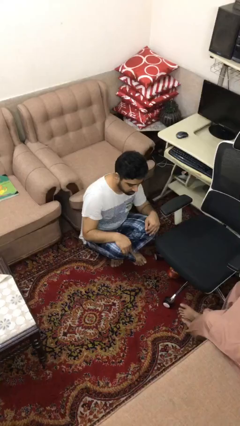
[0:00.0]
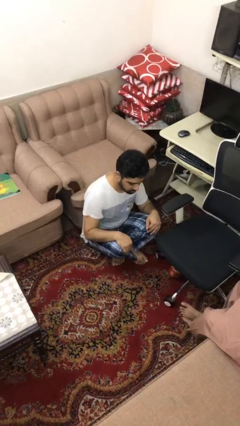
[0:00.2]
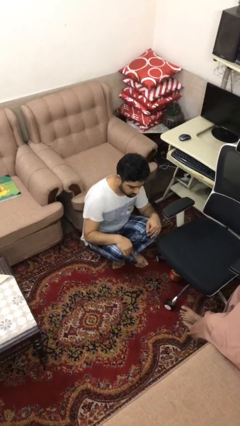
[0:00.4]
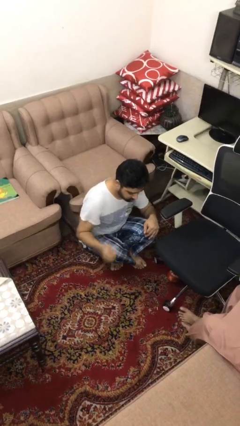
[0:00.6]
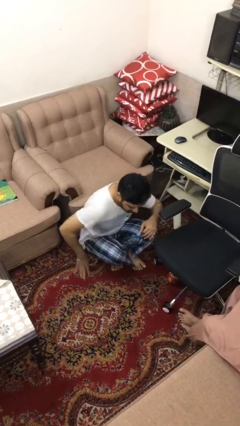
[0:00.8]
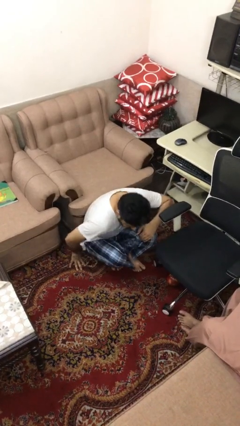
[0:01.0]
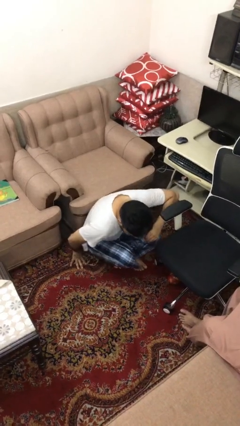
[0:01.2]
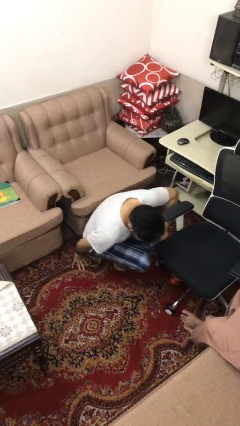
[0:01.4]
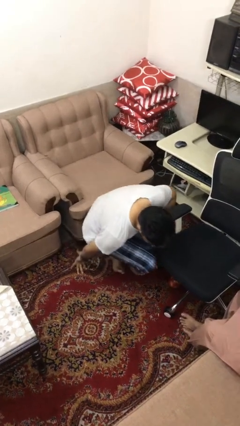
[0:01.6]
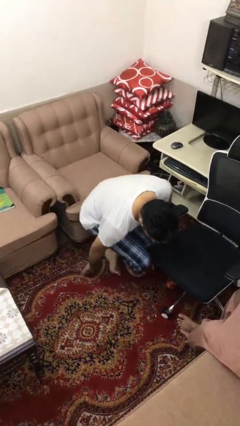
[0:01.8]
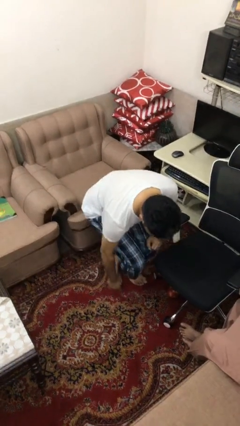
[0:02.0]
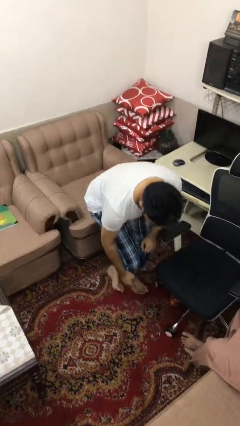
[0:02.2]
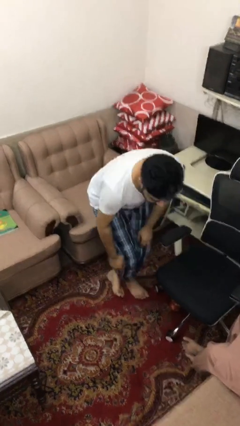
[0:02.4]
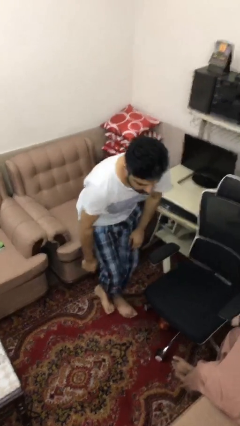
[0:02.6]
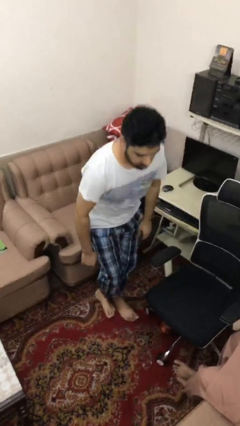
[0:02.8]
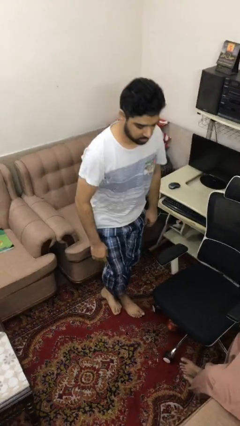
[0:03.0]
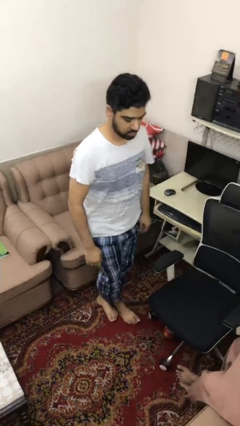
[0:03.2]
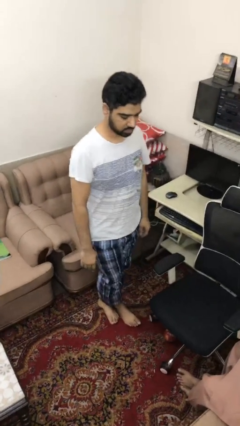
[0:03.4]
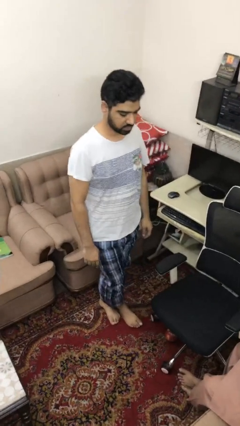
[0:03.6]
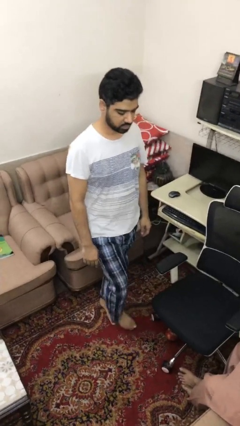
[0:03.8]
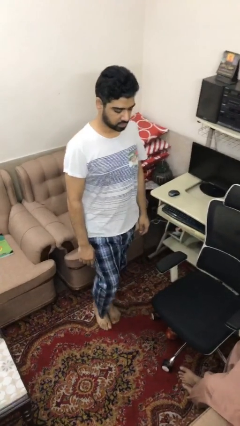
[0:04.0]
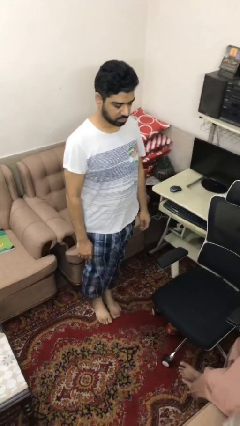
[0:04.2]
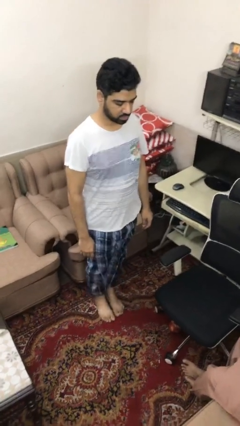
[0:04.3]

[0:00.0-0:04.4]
person stands up from floor

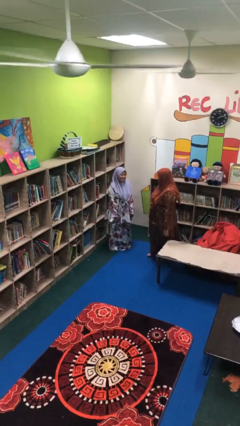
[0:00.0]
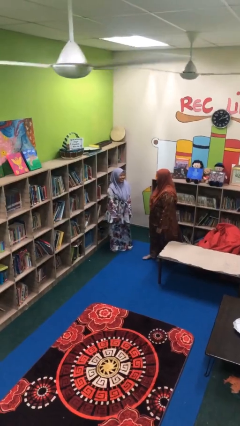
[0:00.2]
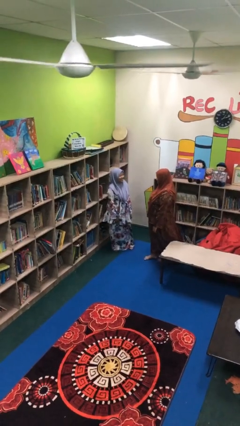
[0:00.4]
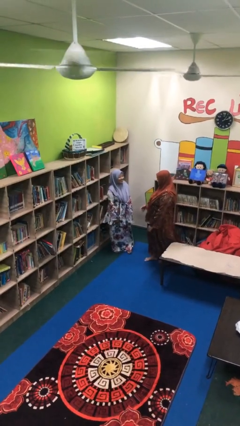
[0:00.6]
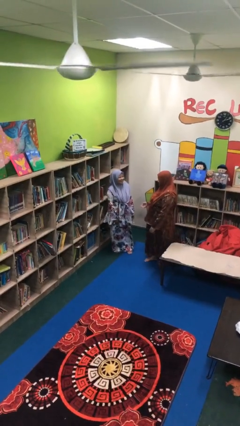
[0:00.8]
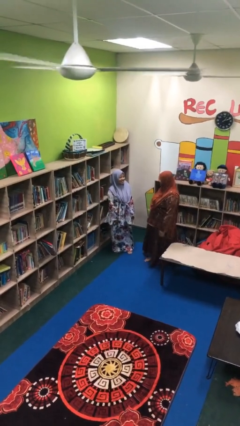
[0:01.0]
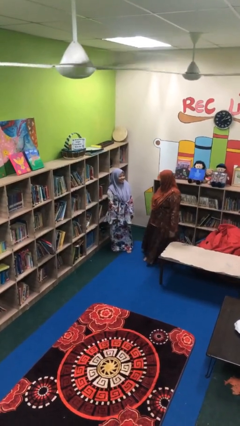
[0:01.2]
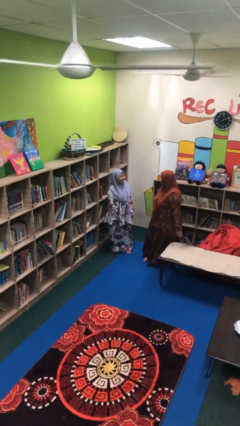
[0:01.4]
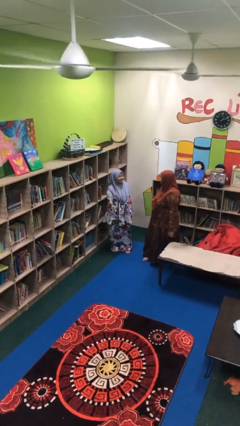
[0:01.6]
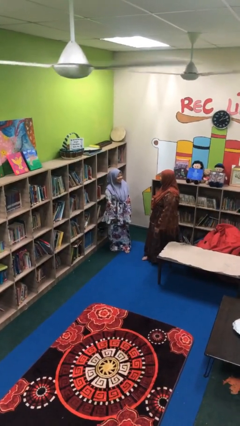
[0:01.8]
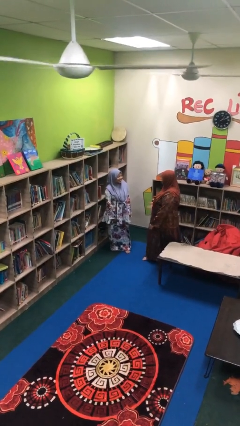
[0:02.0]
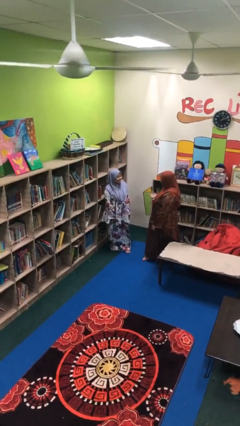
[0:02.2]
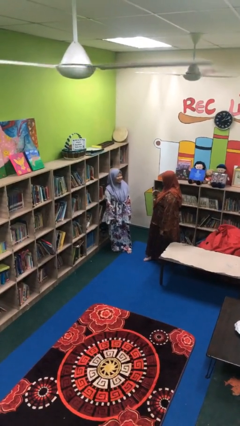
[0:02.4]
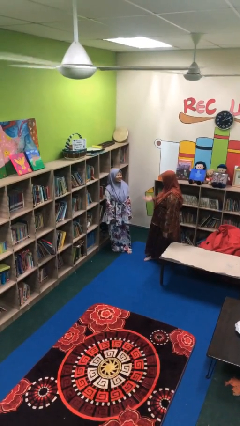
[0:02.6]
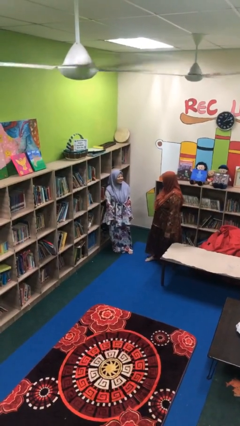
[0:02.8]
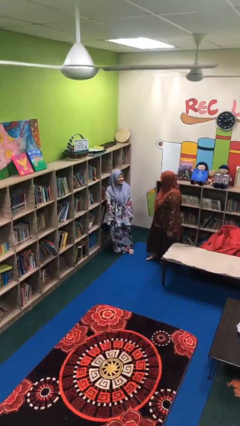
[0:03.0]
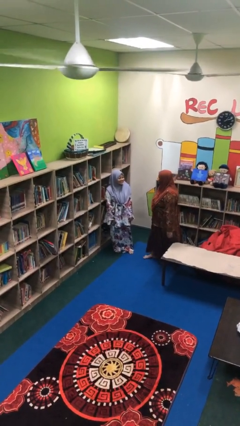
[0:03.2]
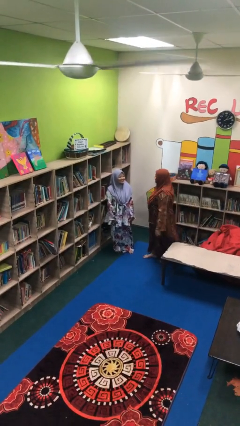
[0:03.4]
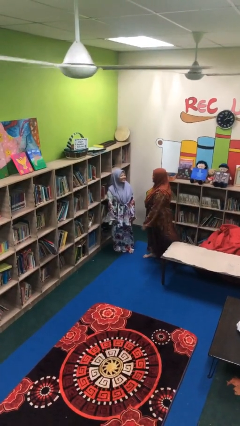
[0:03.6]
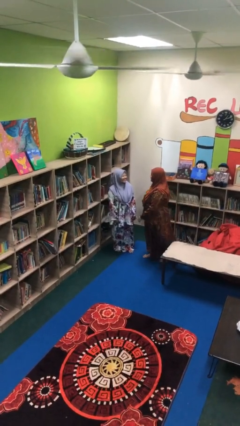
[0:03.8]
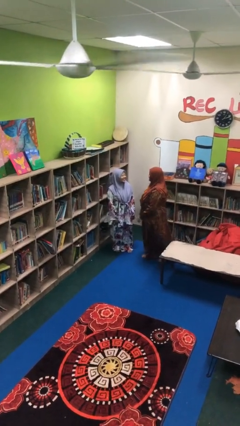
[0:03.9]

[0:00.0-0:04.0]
person talks to person

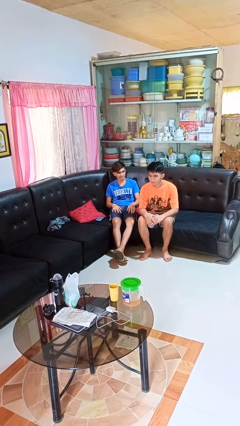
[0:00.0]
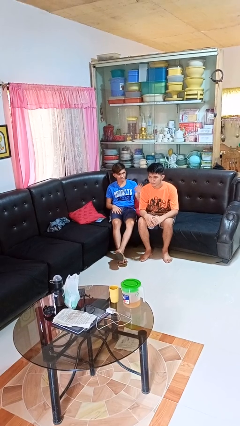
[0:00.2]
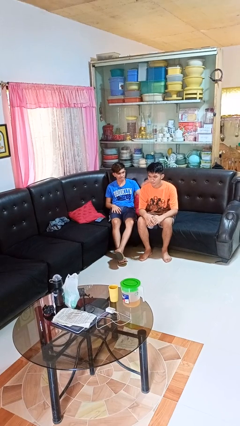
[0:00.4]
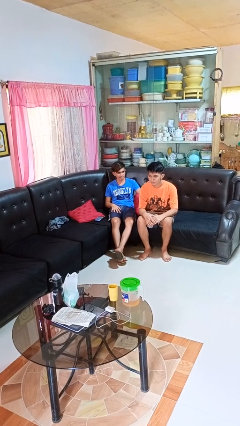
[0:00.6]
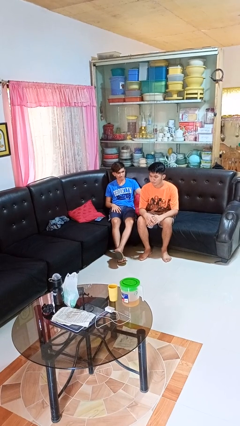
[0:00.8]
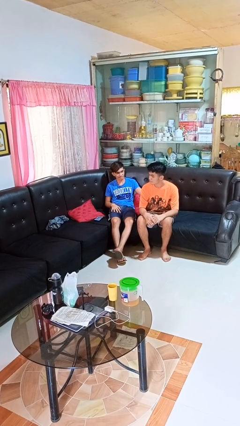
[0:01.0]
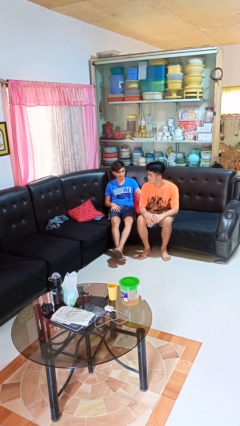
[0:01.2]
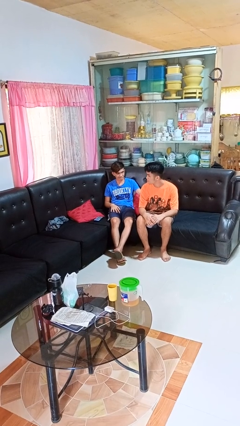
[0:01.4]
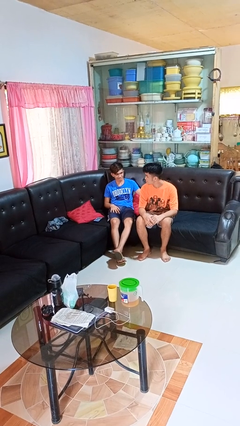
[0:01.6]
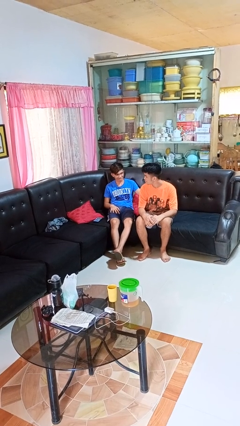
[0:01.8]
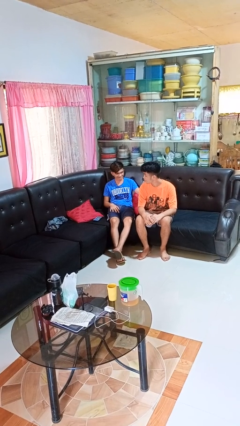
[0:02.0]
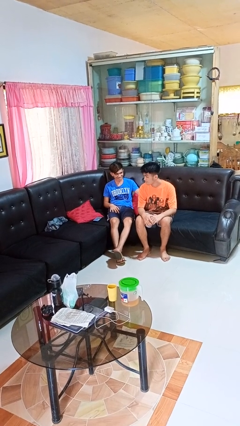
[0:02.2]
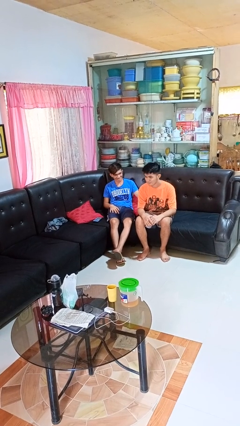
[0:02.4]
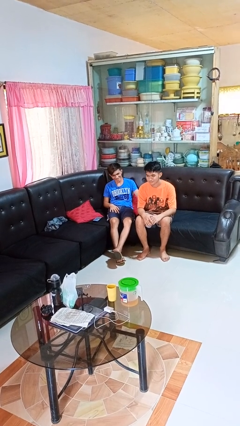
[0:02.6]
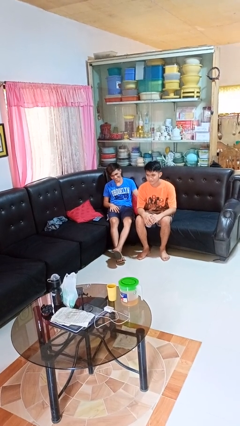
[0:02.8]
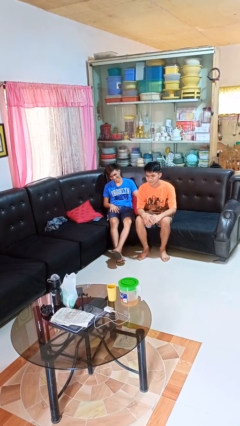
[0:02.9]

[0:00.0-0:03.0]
person touches back of person

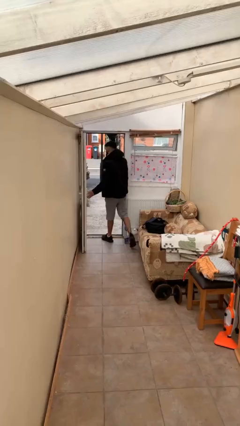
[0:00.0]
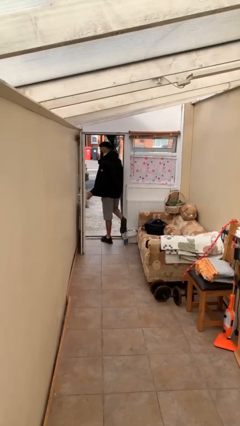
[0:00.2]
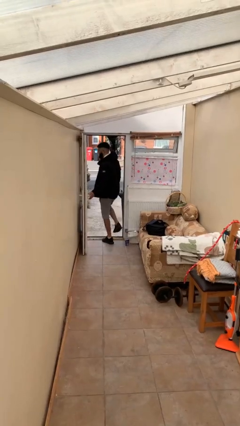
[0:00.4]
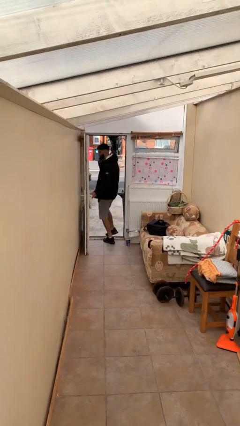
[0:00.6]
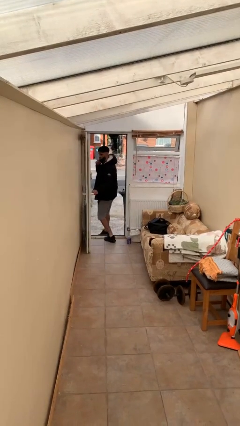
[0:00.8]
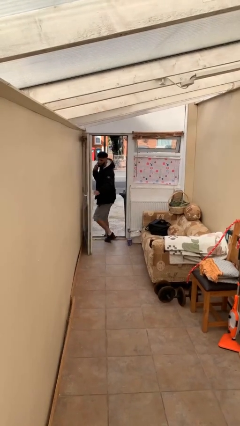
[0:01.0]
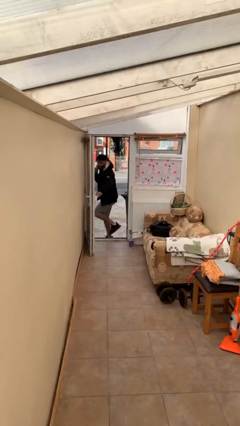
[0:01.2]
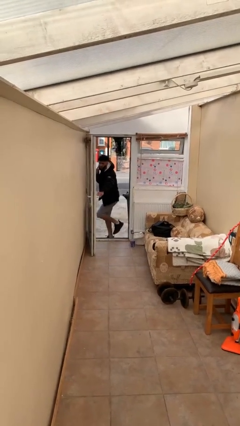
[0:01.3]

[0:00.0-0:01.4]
person exits scene through structure

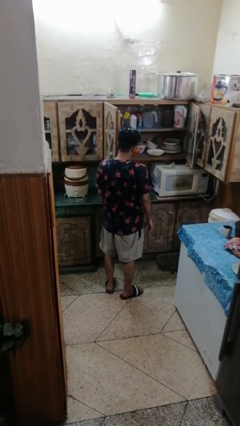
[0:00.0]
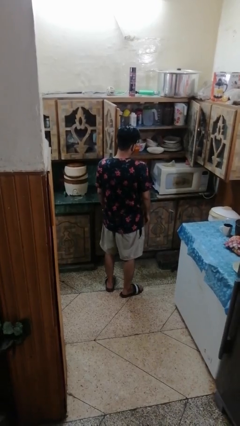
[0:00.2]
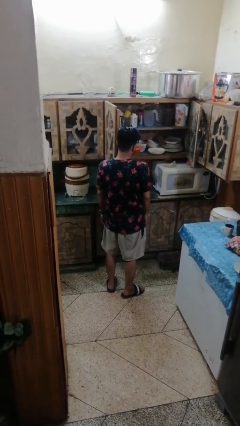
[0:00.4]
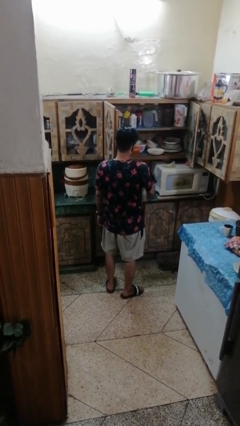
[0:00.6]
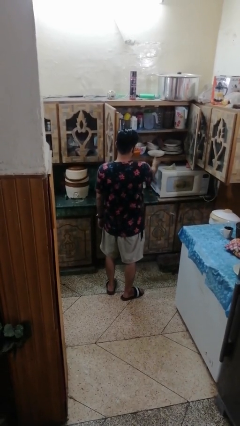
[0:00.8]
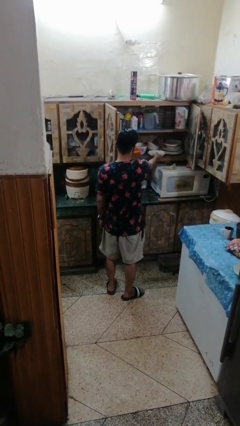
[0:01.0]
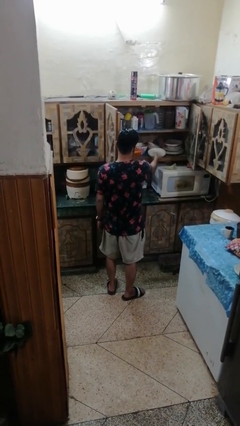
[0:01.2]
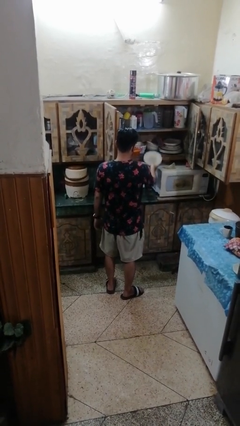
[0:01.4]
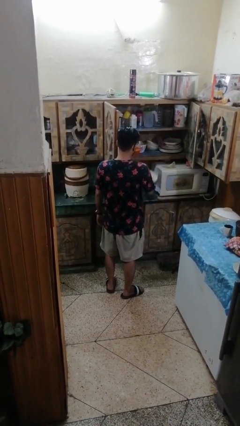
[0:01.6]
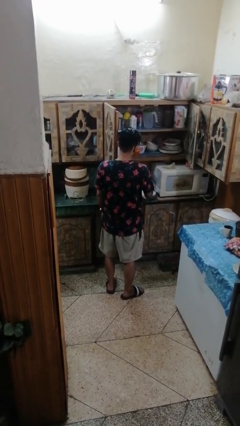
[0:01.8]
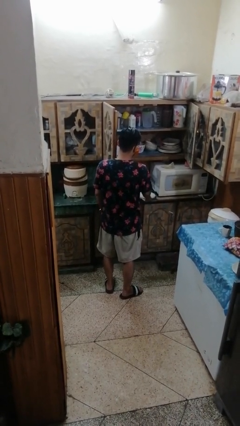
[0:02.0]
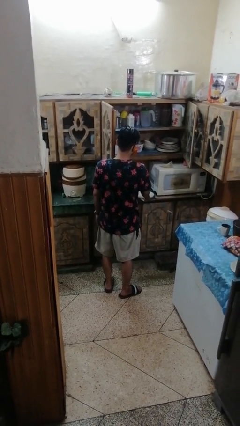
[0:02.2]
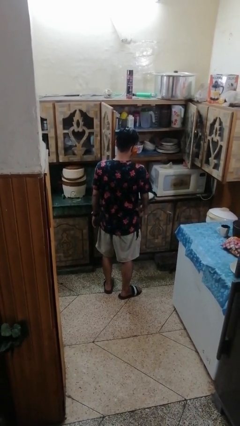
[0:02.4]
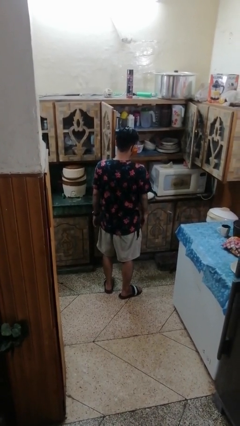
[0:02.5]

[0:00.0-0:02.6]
person takes object from cabinet

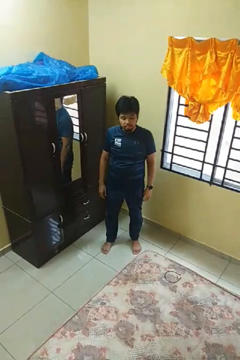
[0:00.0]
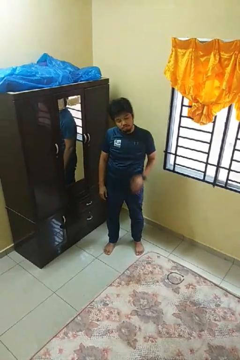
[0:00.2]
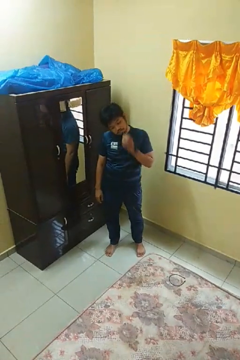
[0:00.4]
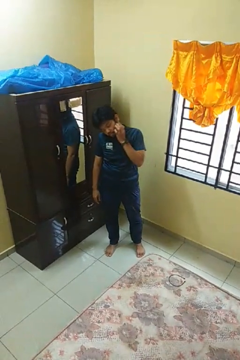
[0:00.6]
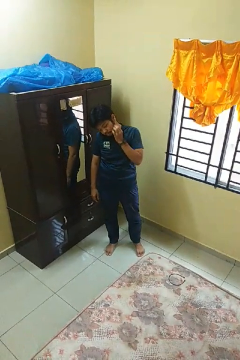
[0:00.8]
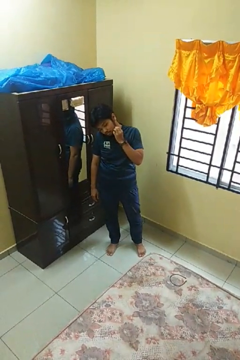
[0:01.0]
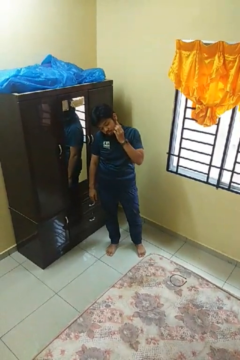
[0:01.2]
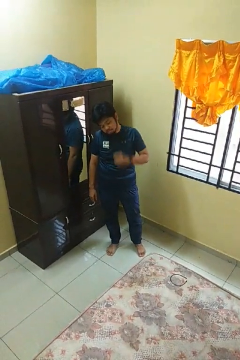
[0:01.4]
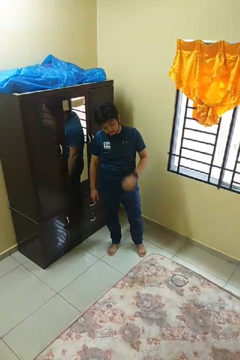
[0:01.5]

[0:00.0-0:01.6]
person scratches face

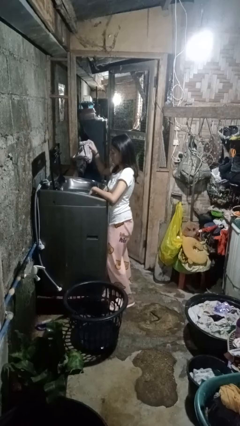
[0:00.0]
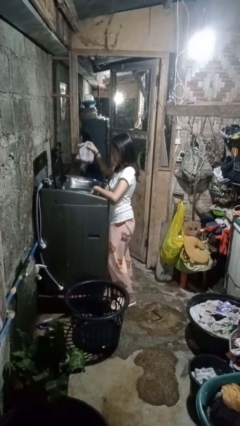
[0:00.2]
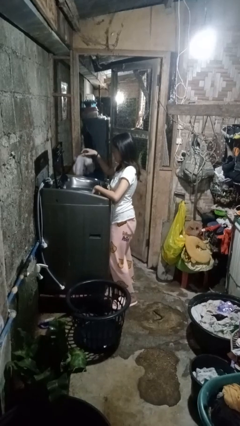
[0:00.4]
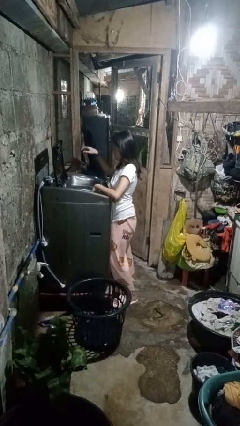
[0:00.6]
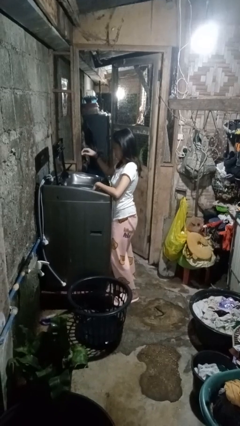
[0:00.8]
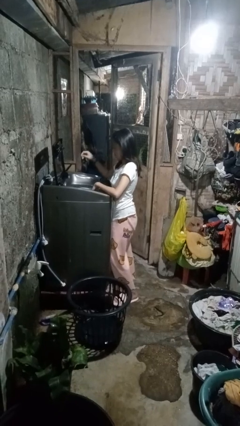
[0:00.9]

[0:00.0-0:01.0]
person loads dryer
